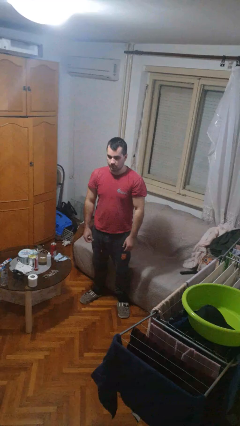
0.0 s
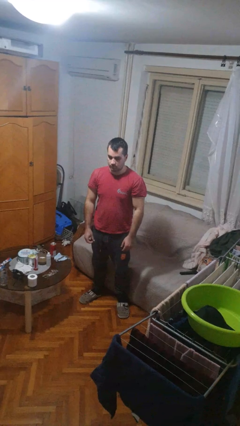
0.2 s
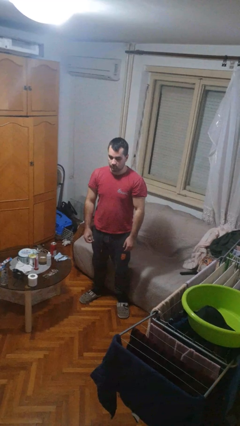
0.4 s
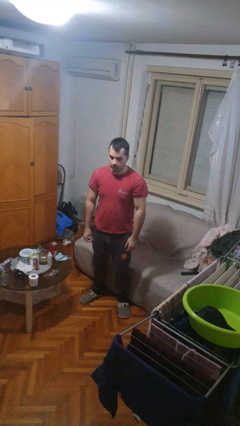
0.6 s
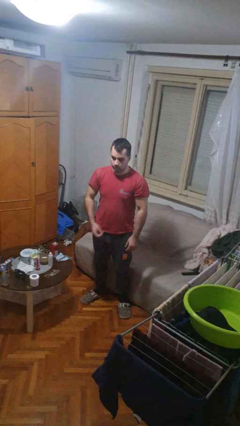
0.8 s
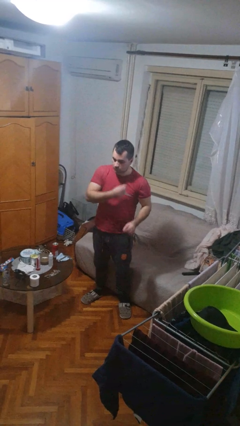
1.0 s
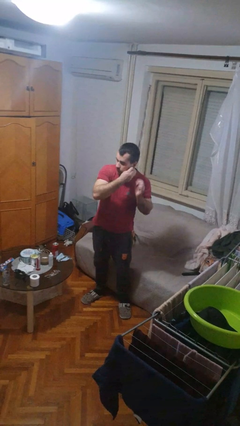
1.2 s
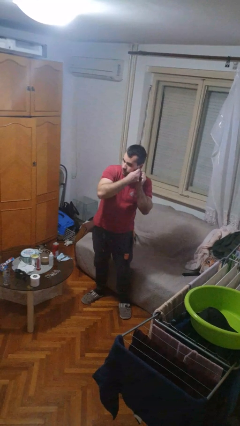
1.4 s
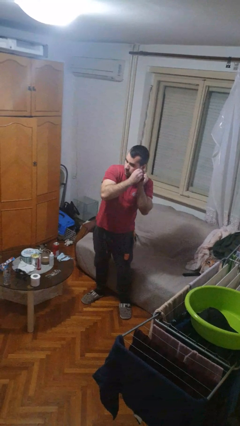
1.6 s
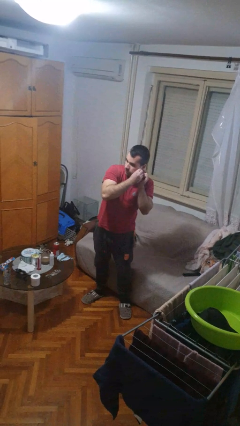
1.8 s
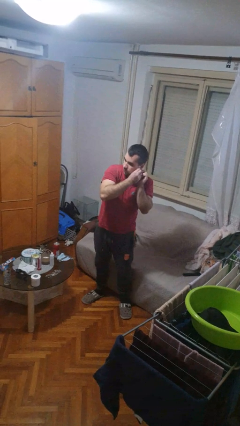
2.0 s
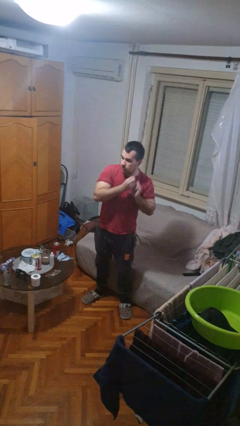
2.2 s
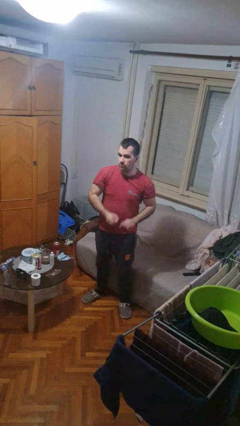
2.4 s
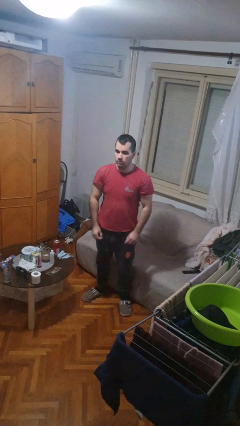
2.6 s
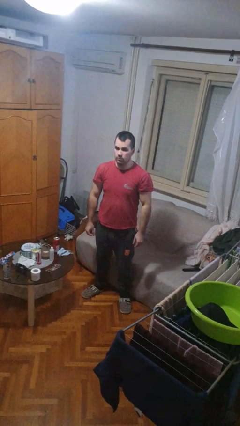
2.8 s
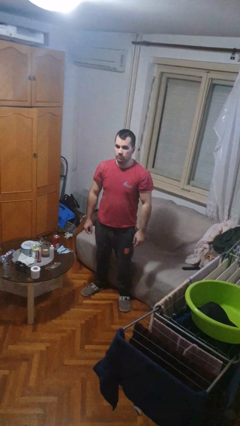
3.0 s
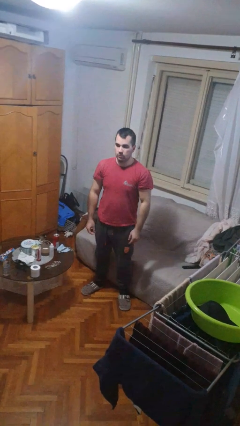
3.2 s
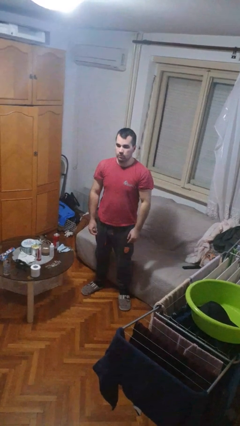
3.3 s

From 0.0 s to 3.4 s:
person takes off earrings

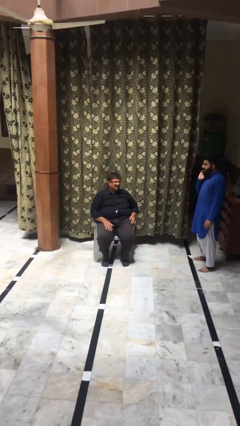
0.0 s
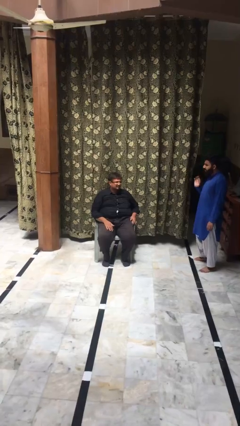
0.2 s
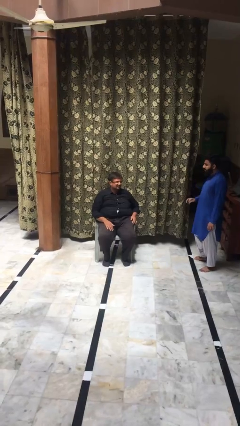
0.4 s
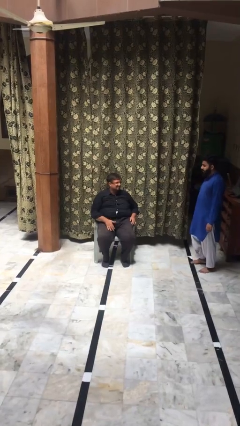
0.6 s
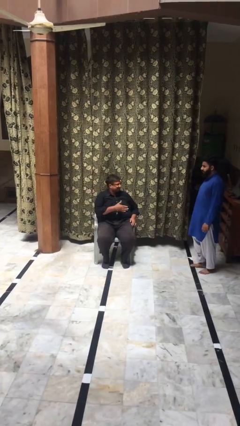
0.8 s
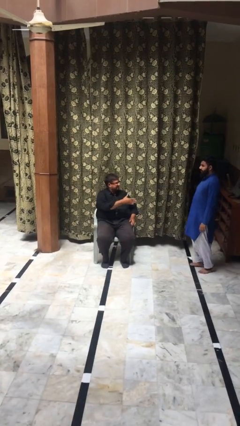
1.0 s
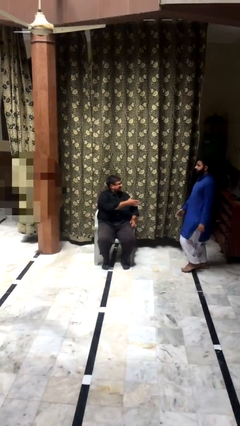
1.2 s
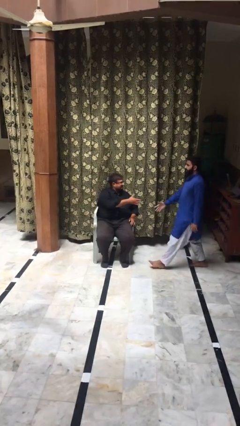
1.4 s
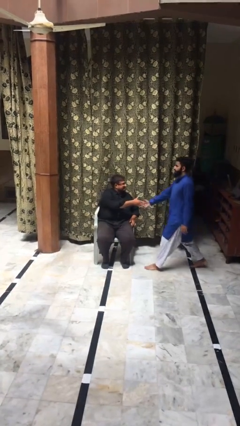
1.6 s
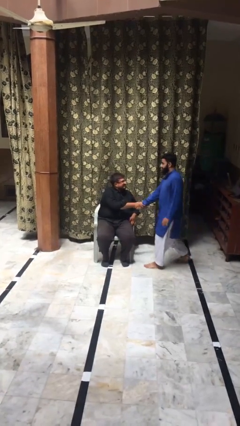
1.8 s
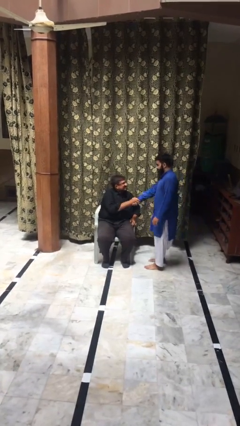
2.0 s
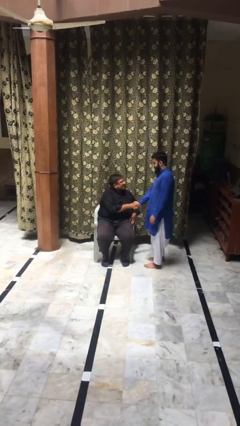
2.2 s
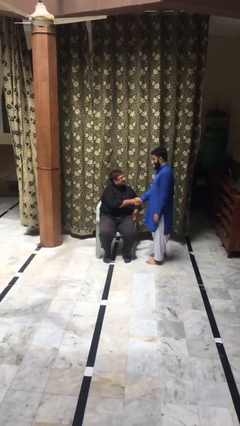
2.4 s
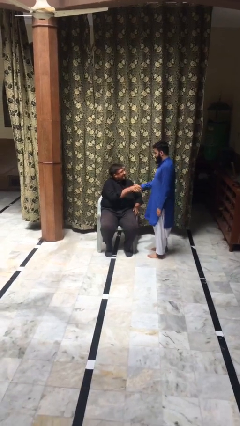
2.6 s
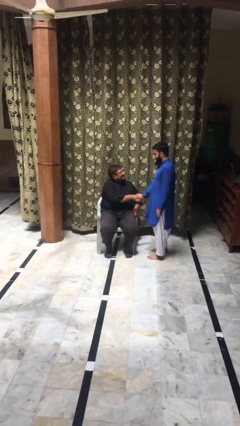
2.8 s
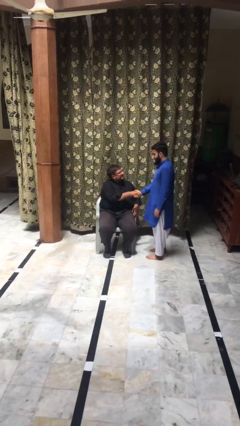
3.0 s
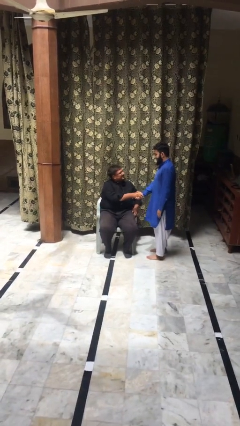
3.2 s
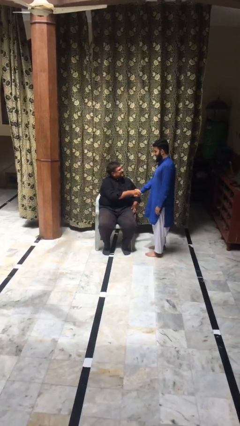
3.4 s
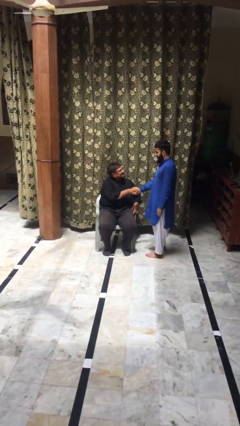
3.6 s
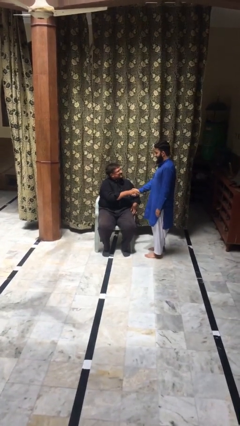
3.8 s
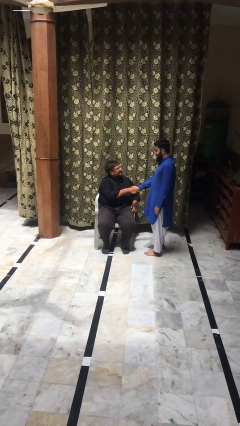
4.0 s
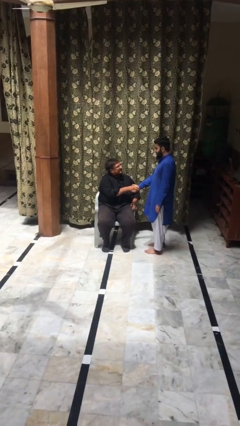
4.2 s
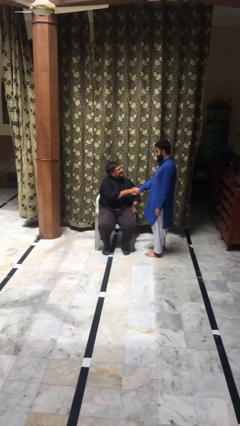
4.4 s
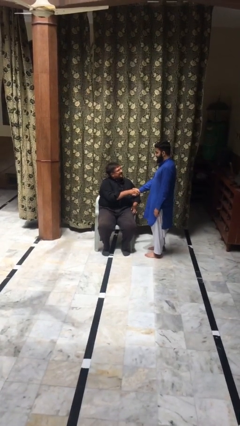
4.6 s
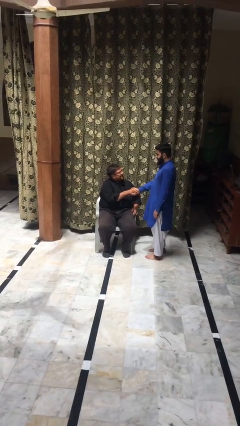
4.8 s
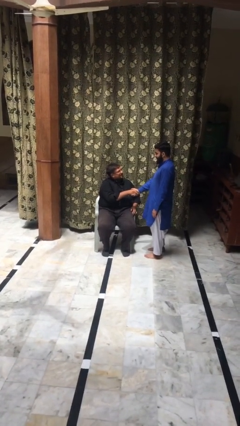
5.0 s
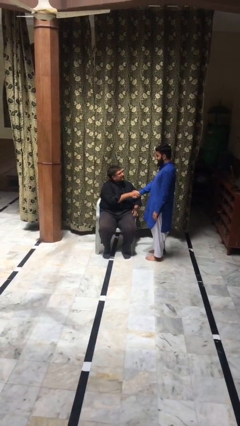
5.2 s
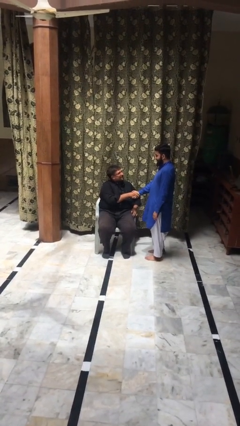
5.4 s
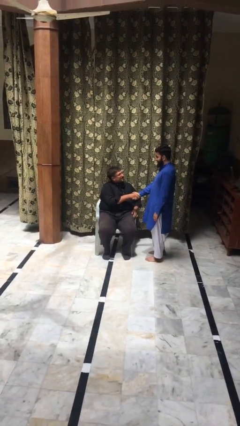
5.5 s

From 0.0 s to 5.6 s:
person shakes hand

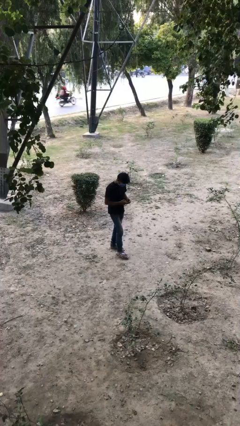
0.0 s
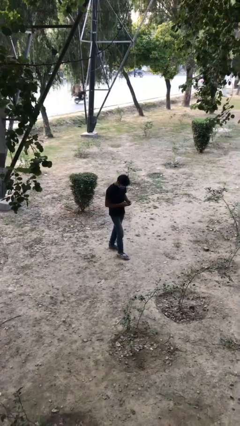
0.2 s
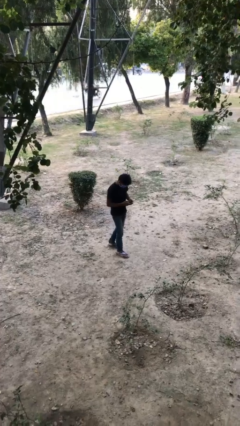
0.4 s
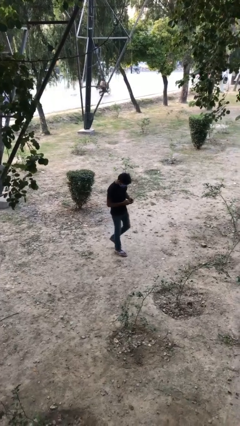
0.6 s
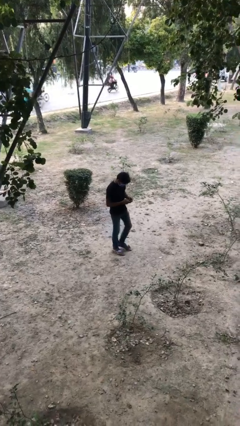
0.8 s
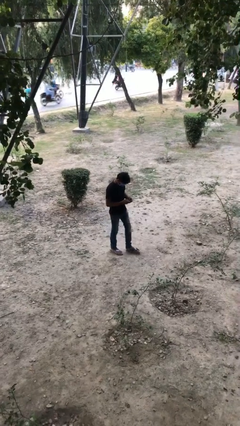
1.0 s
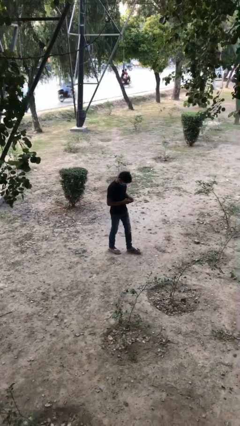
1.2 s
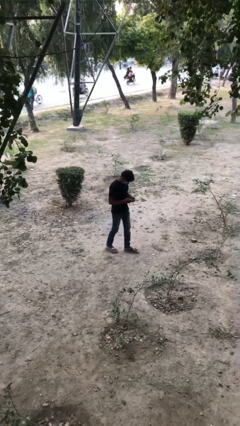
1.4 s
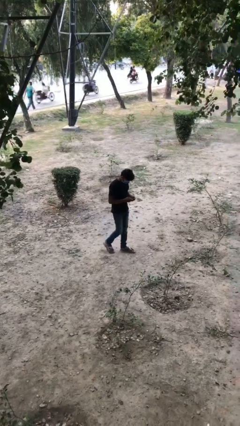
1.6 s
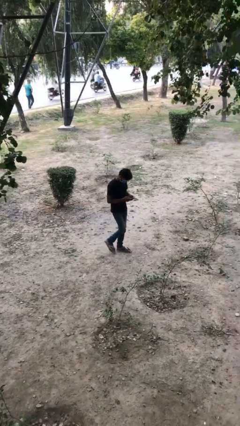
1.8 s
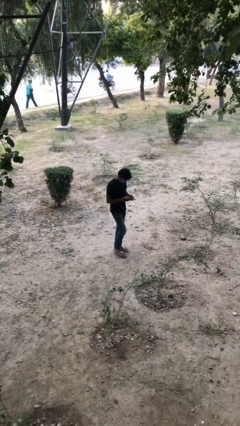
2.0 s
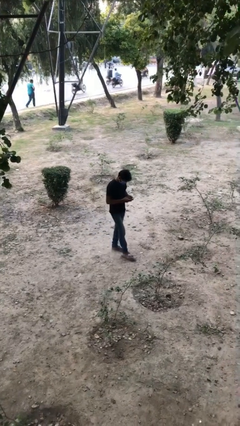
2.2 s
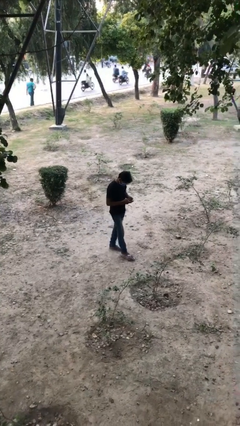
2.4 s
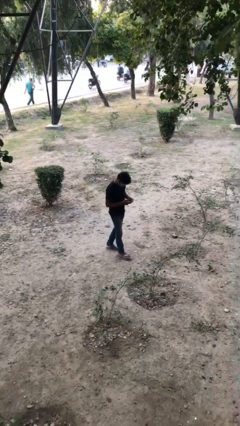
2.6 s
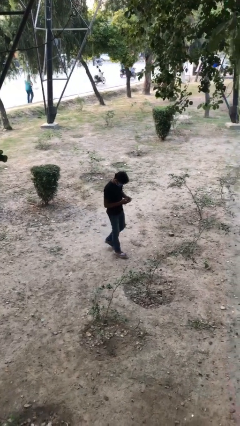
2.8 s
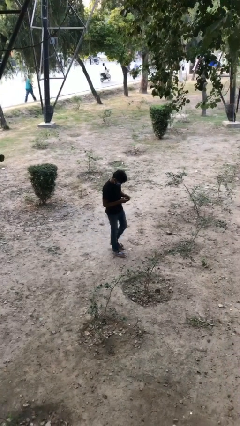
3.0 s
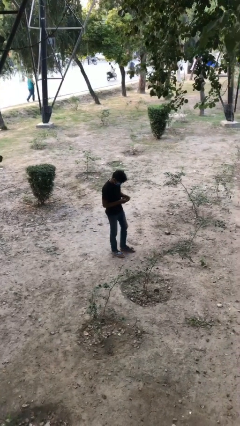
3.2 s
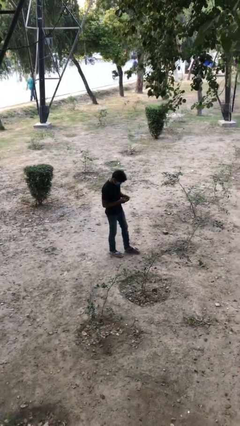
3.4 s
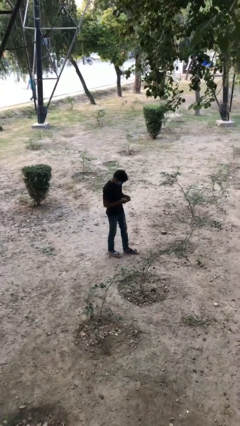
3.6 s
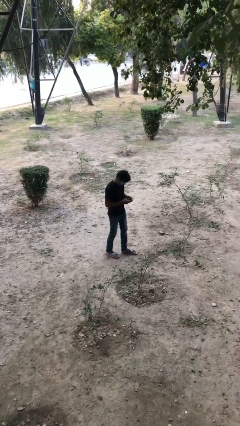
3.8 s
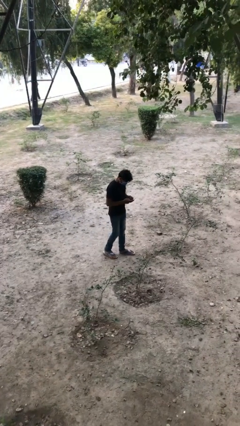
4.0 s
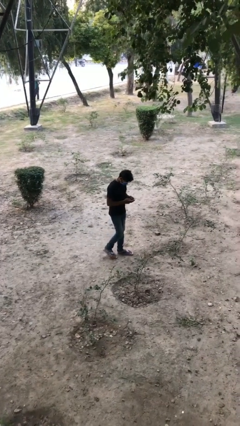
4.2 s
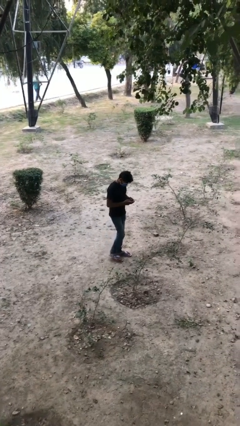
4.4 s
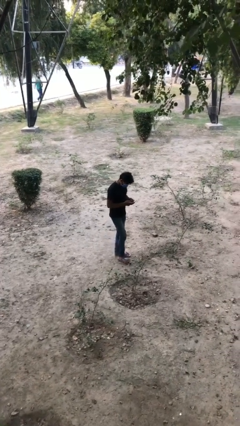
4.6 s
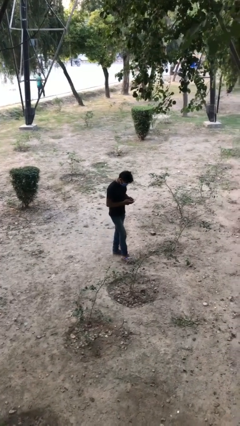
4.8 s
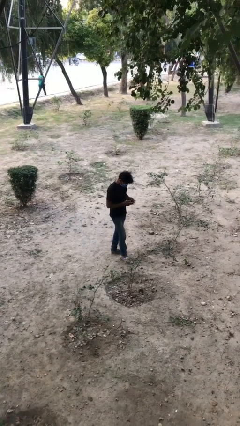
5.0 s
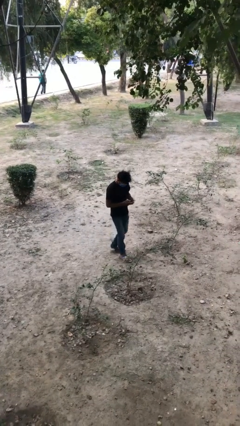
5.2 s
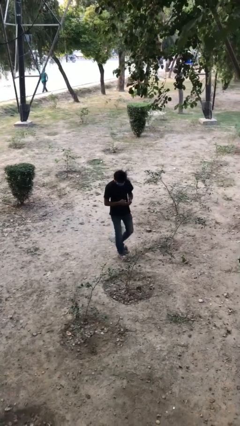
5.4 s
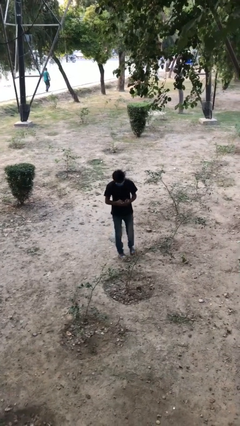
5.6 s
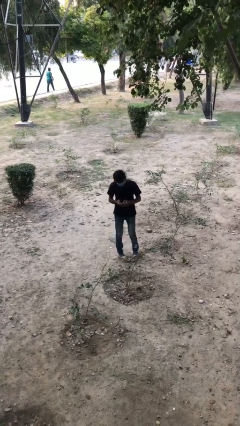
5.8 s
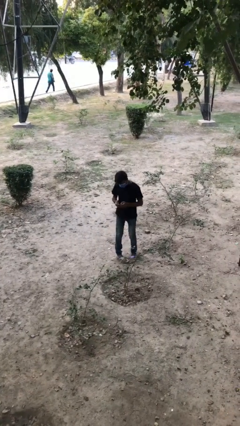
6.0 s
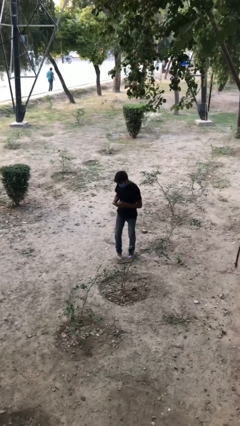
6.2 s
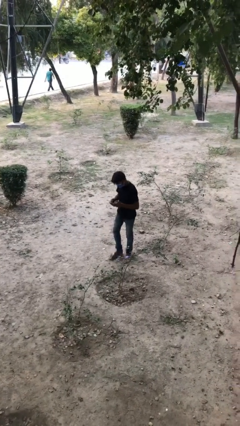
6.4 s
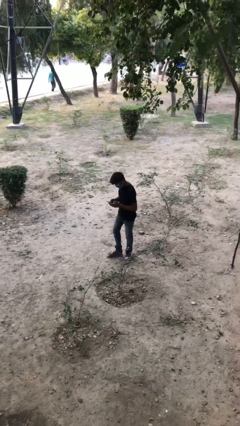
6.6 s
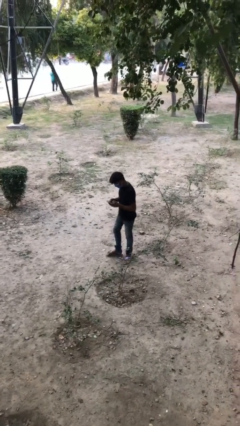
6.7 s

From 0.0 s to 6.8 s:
person texts on phone

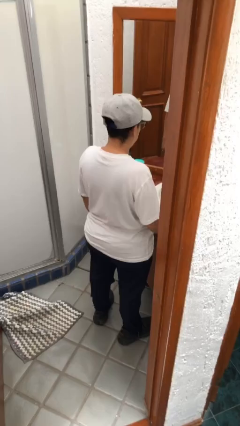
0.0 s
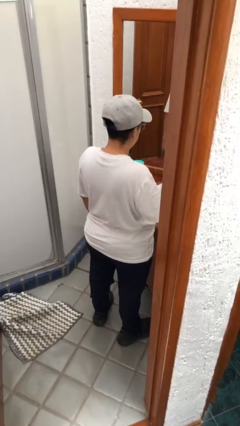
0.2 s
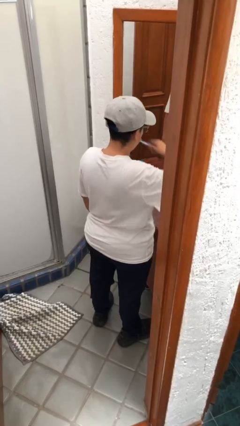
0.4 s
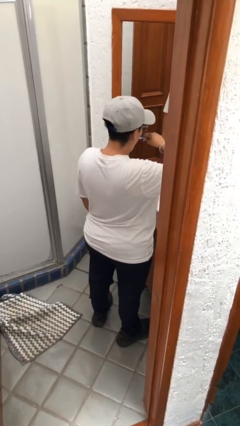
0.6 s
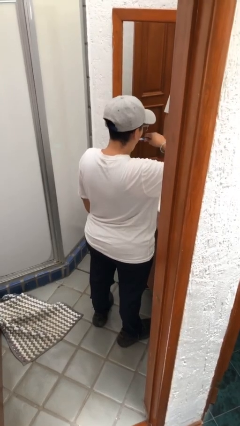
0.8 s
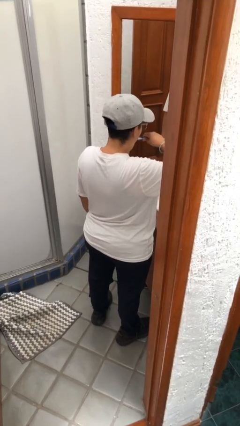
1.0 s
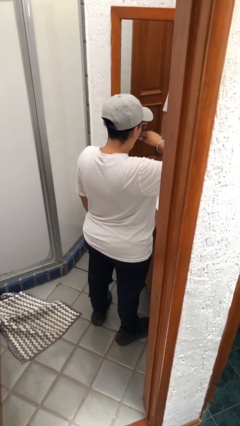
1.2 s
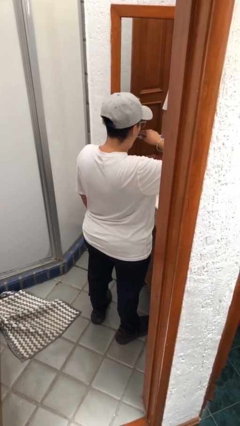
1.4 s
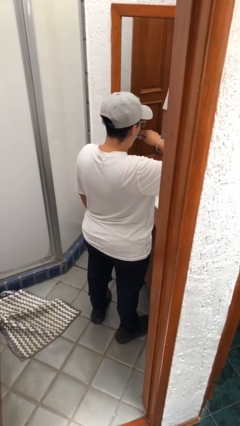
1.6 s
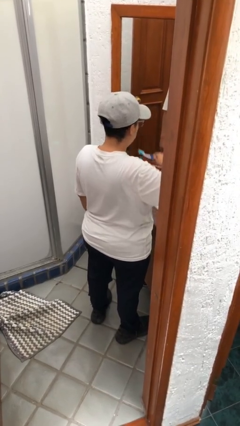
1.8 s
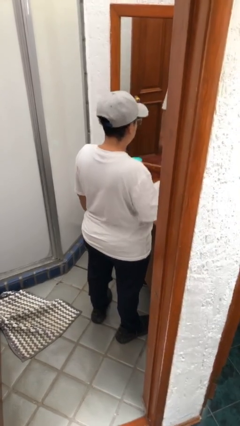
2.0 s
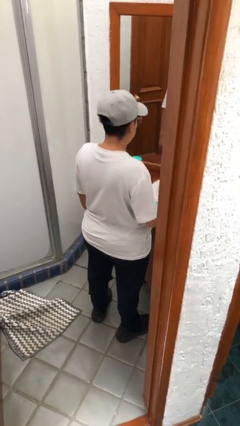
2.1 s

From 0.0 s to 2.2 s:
person brushes teeth
